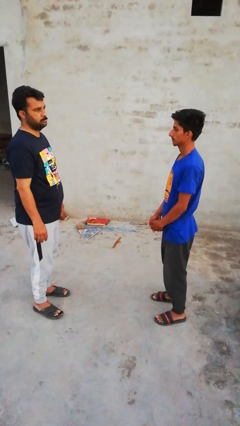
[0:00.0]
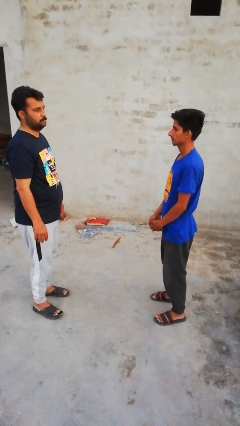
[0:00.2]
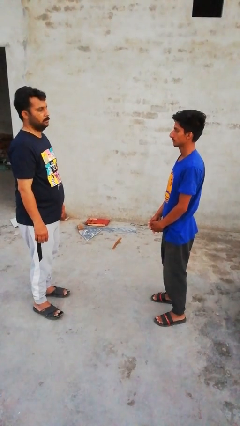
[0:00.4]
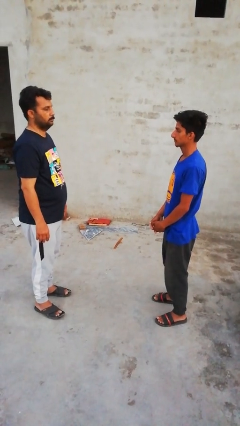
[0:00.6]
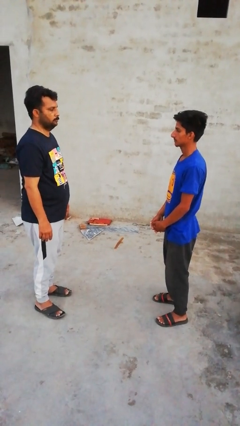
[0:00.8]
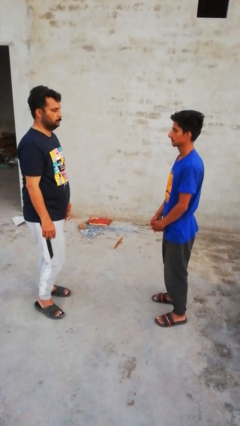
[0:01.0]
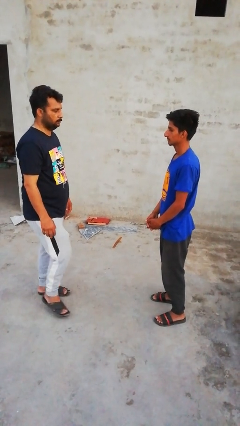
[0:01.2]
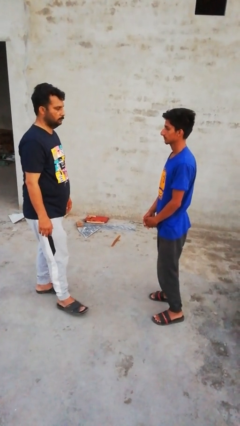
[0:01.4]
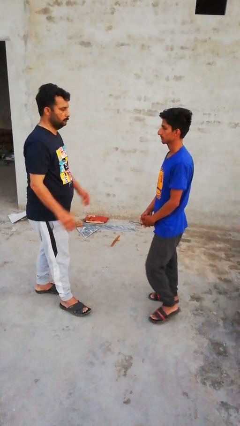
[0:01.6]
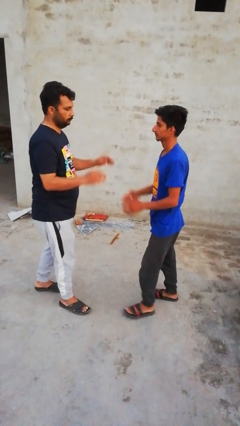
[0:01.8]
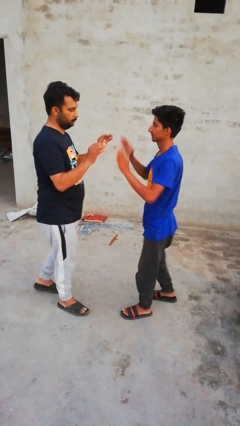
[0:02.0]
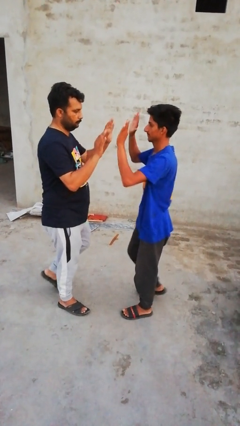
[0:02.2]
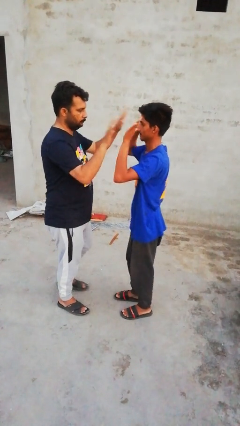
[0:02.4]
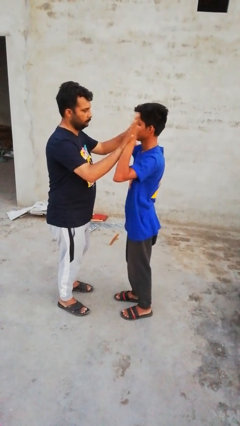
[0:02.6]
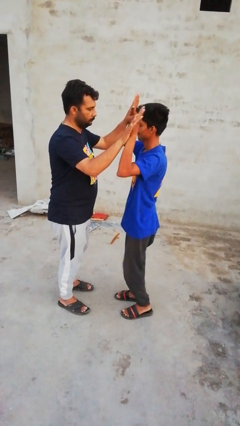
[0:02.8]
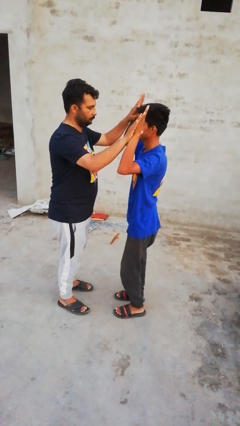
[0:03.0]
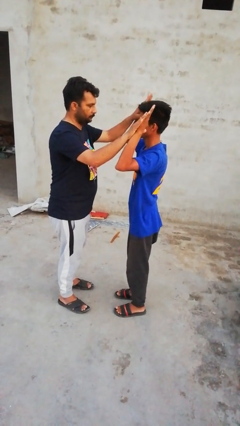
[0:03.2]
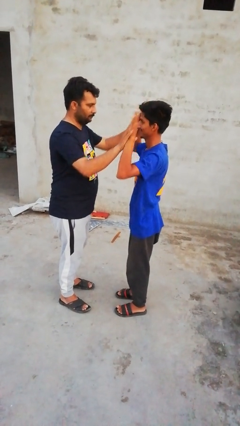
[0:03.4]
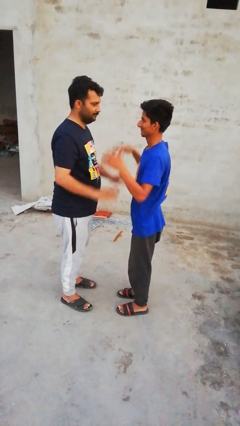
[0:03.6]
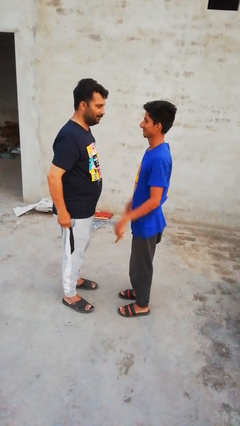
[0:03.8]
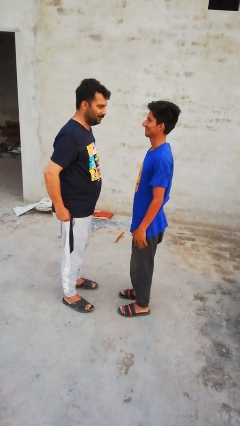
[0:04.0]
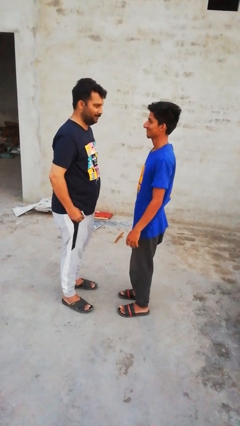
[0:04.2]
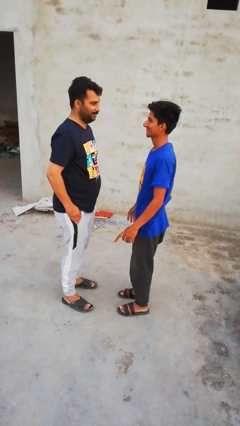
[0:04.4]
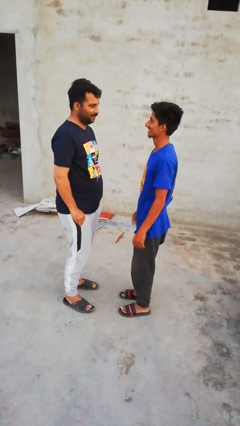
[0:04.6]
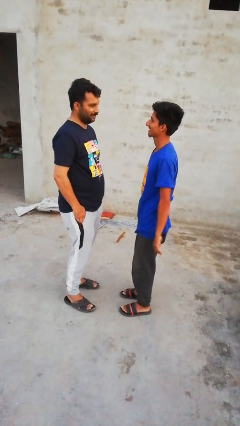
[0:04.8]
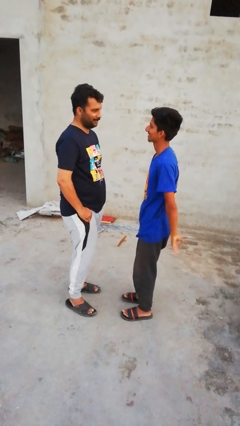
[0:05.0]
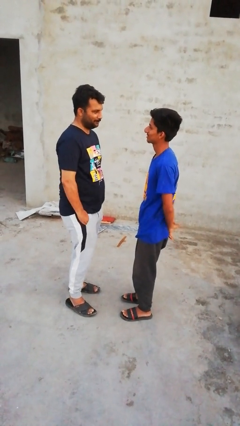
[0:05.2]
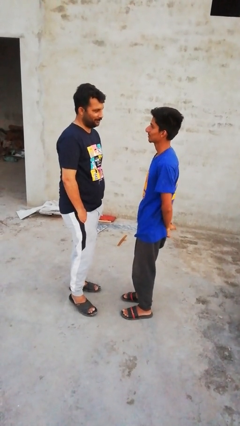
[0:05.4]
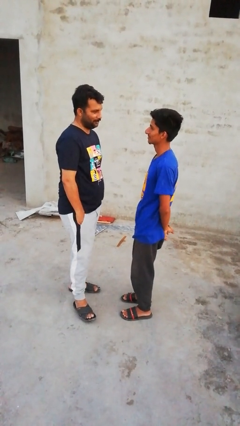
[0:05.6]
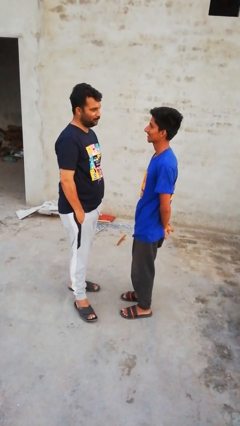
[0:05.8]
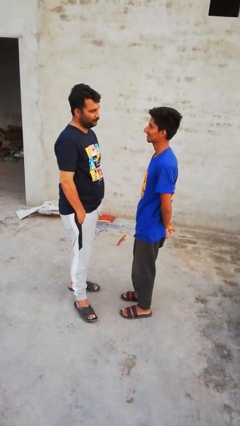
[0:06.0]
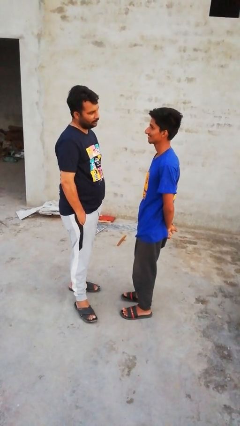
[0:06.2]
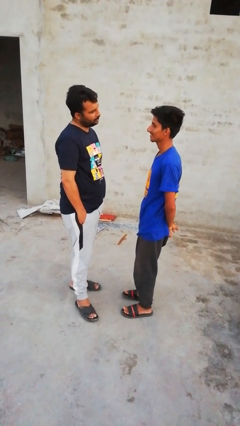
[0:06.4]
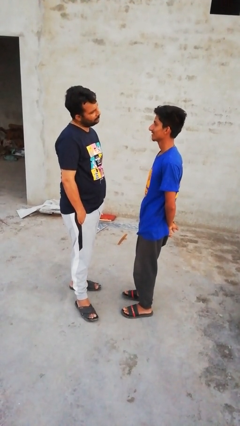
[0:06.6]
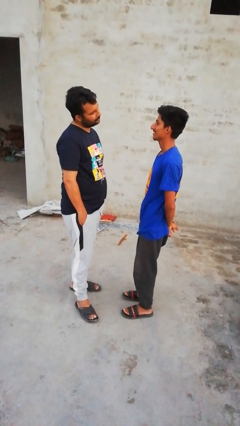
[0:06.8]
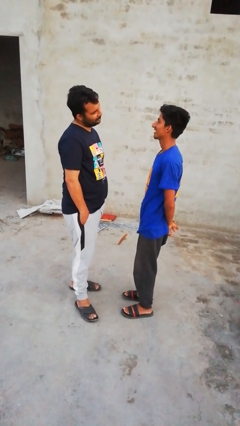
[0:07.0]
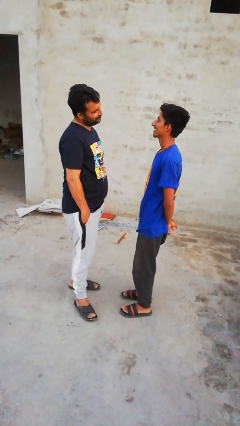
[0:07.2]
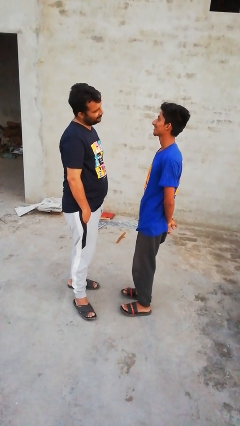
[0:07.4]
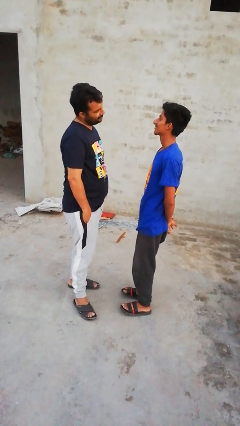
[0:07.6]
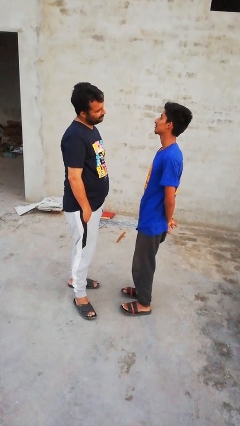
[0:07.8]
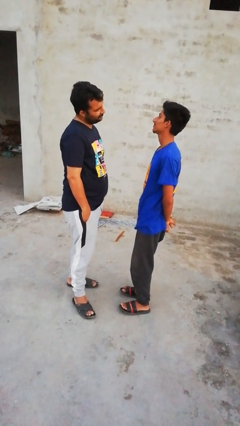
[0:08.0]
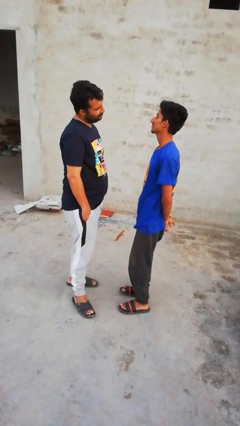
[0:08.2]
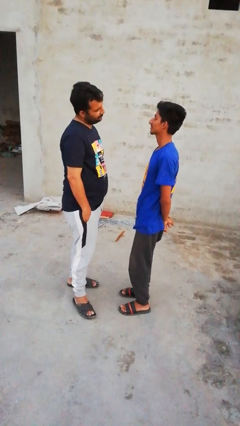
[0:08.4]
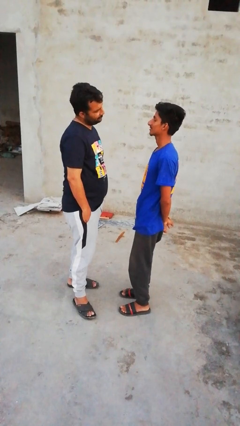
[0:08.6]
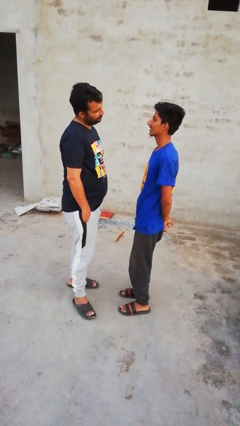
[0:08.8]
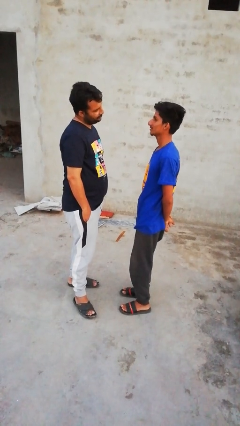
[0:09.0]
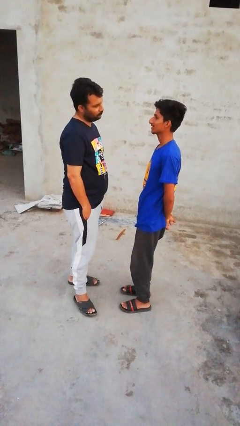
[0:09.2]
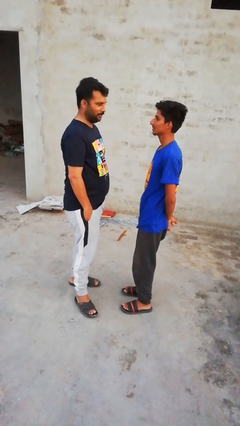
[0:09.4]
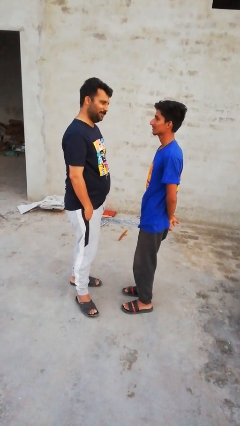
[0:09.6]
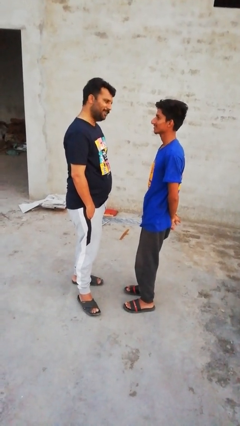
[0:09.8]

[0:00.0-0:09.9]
person highfives hand

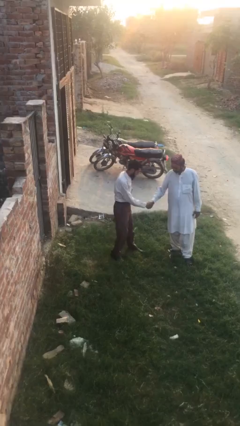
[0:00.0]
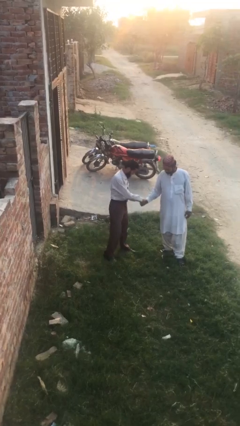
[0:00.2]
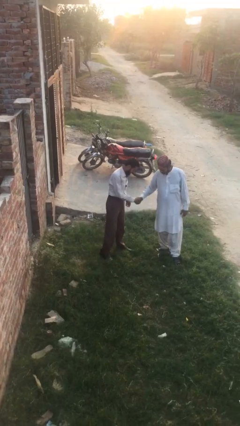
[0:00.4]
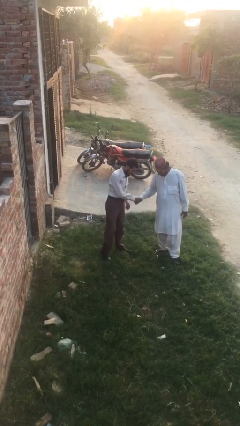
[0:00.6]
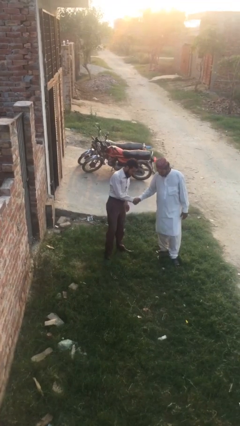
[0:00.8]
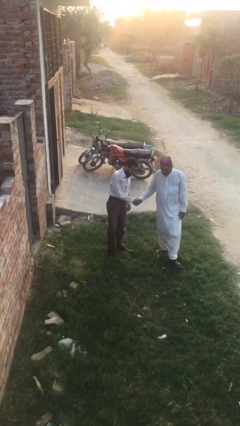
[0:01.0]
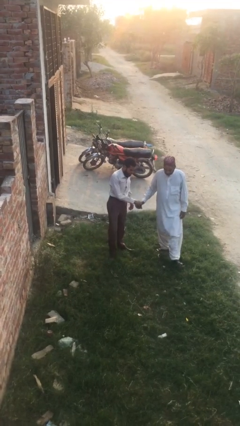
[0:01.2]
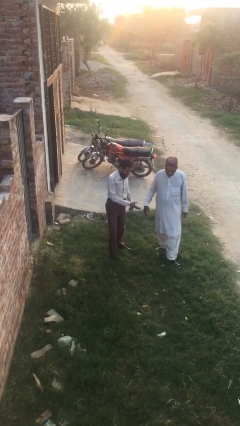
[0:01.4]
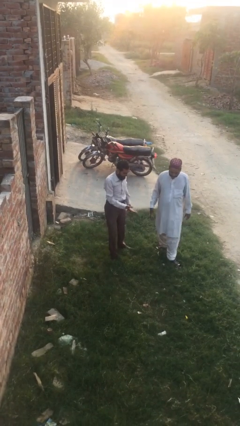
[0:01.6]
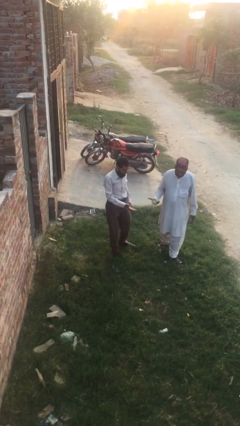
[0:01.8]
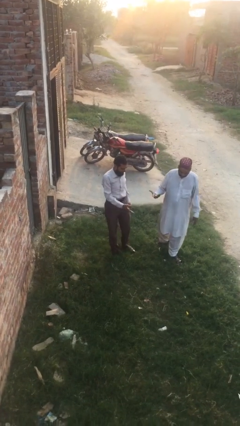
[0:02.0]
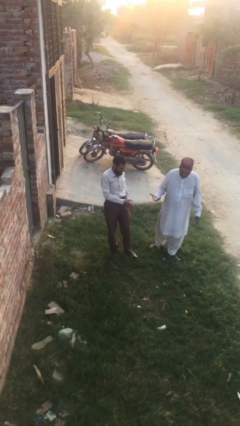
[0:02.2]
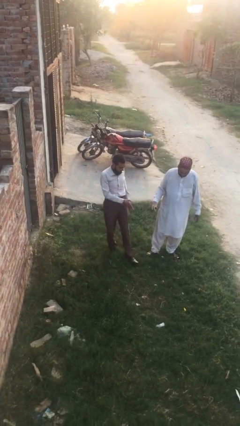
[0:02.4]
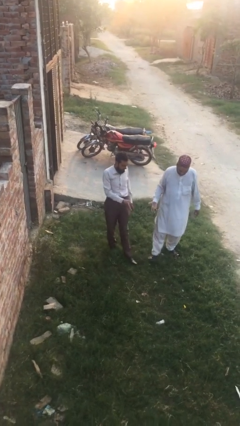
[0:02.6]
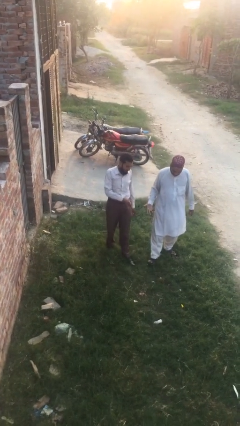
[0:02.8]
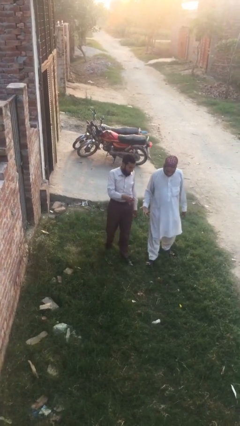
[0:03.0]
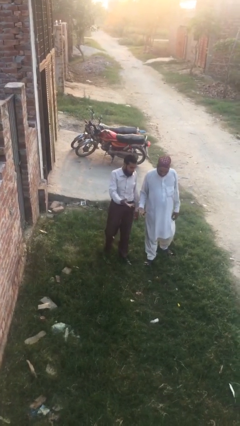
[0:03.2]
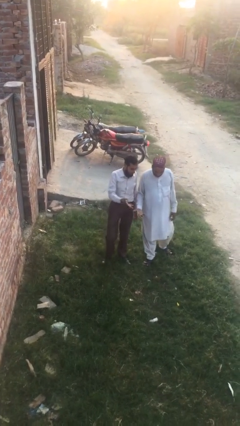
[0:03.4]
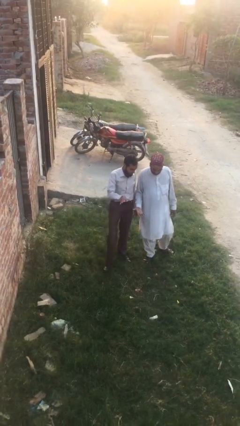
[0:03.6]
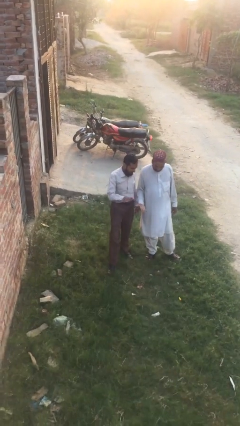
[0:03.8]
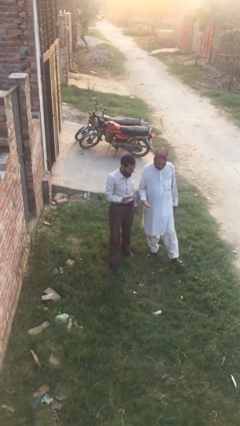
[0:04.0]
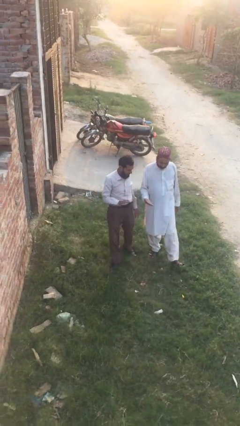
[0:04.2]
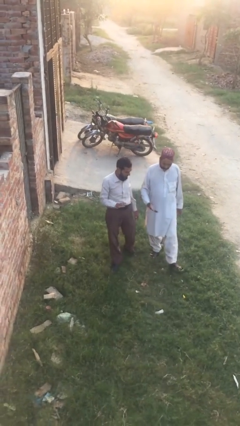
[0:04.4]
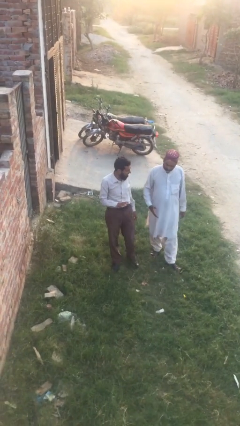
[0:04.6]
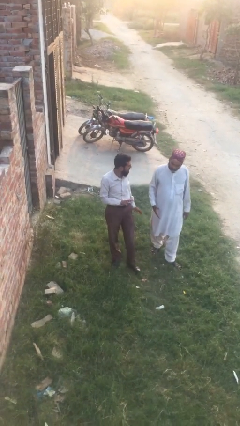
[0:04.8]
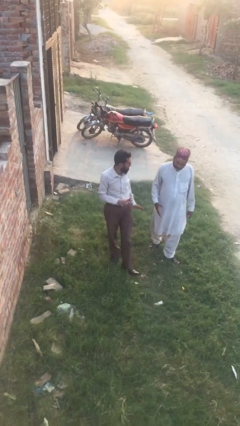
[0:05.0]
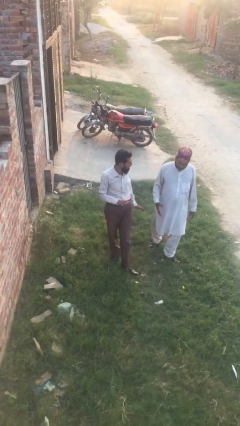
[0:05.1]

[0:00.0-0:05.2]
person talks to person

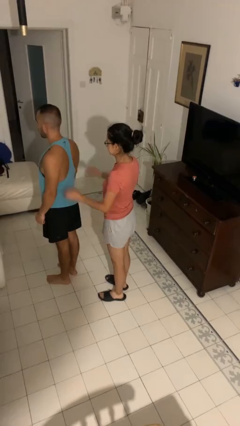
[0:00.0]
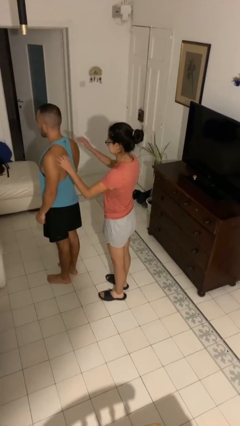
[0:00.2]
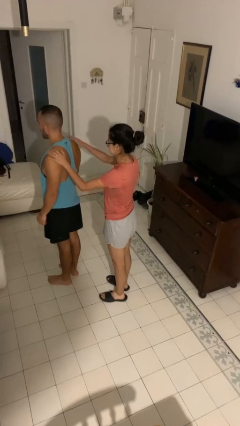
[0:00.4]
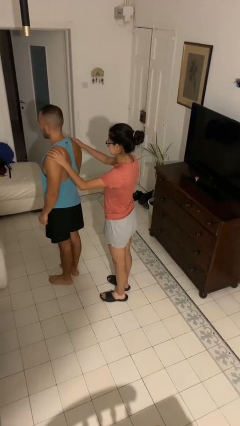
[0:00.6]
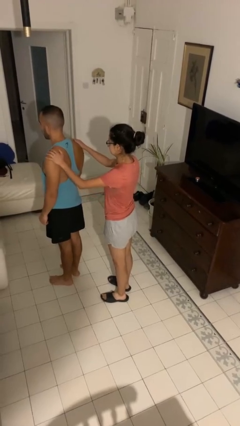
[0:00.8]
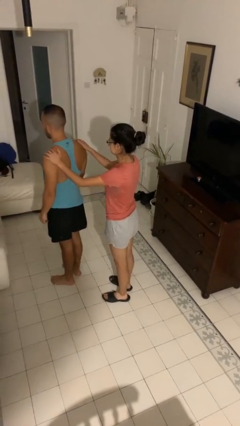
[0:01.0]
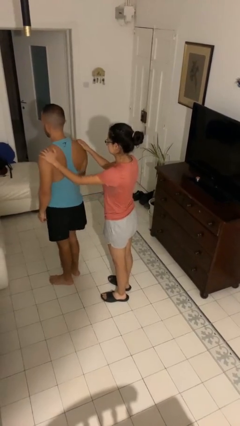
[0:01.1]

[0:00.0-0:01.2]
person grabs person by shoulder

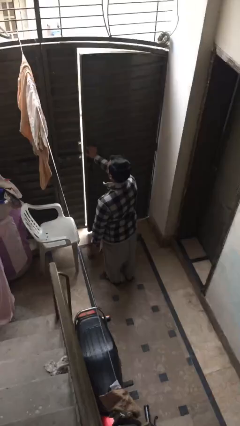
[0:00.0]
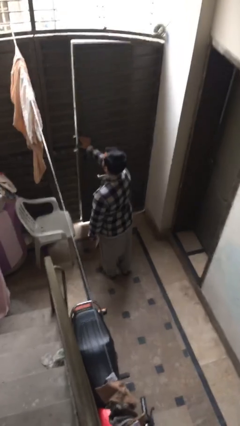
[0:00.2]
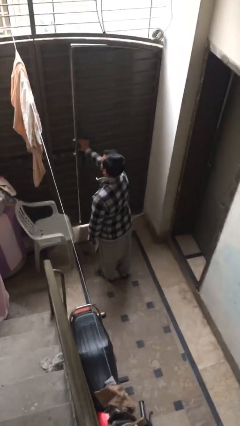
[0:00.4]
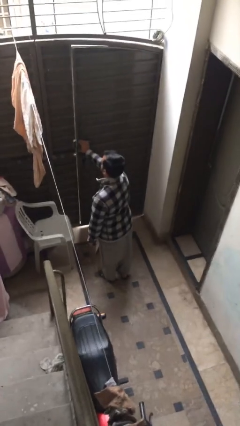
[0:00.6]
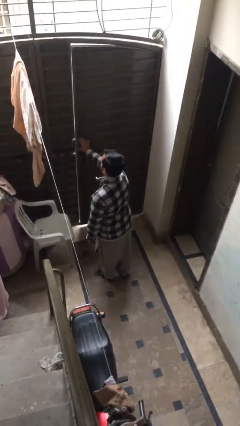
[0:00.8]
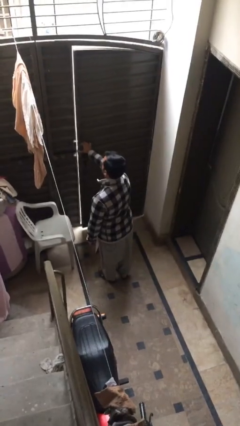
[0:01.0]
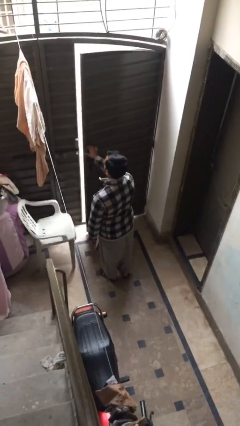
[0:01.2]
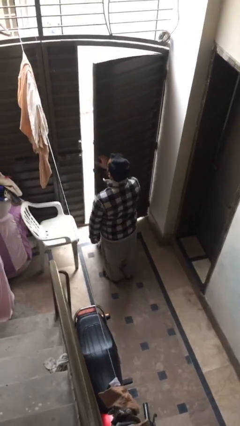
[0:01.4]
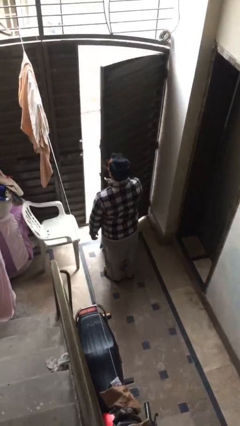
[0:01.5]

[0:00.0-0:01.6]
person opens facility door
